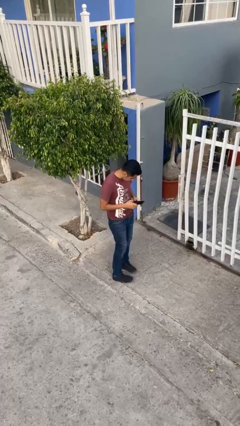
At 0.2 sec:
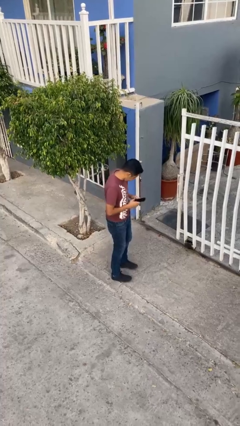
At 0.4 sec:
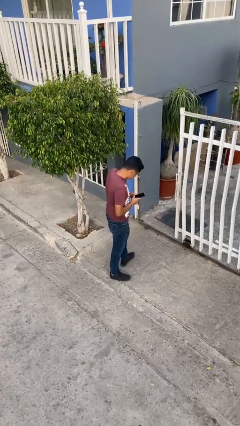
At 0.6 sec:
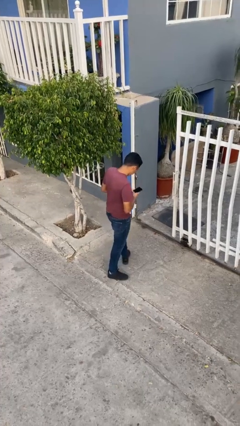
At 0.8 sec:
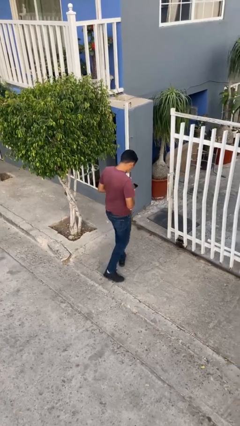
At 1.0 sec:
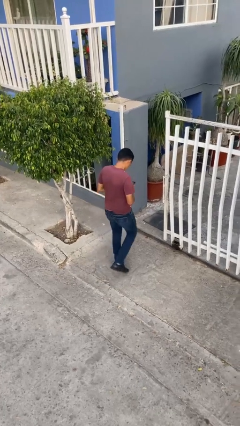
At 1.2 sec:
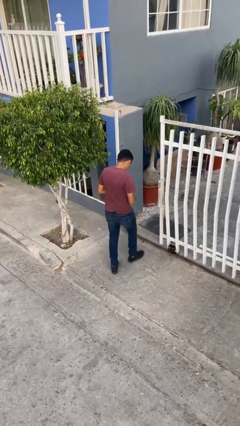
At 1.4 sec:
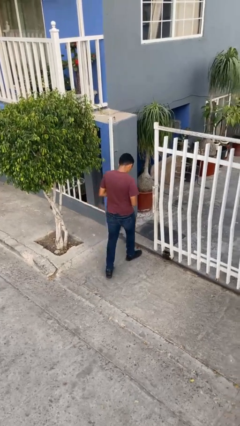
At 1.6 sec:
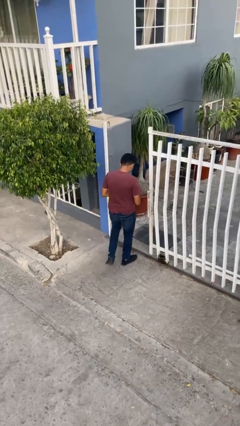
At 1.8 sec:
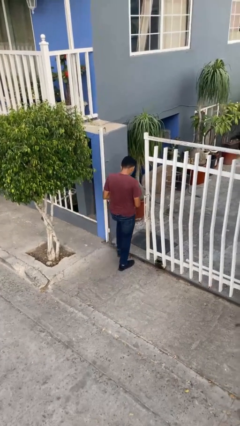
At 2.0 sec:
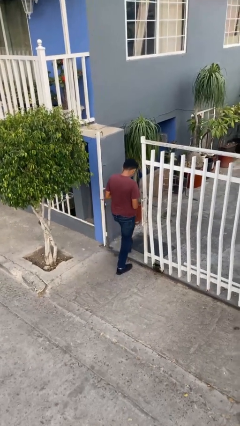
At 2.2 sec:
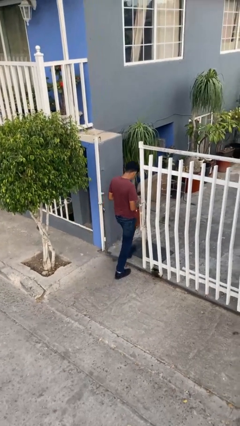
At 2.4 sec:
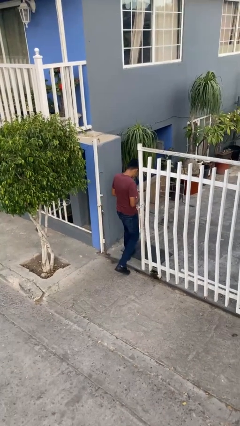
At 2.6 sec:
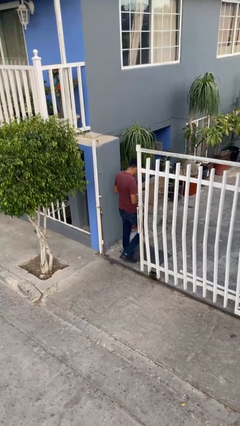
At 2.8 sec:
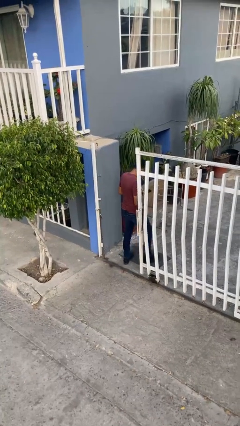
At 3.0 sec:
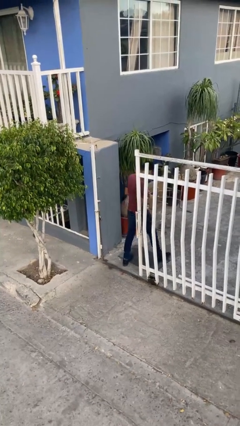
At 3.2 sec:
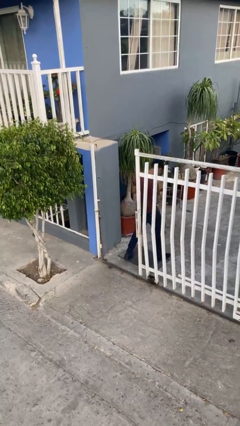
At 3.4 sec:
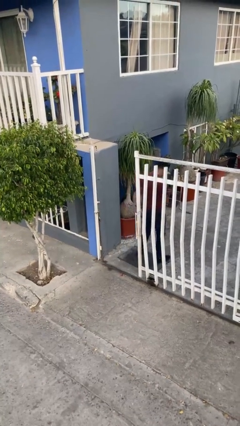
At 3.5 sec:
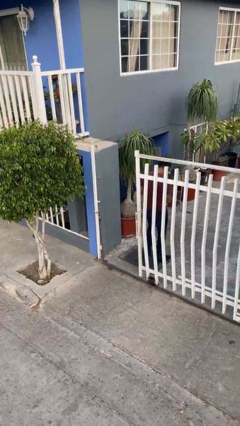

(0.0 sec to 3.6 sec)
person exits scene through structure

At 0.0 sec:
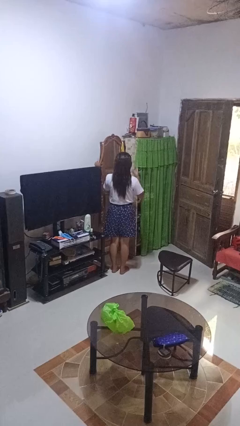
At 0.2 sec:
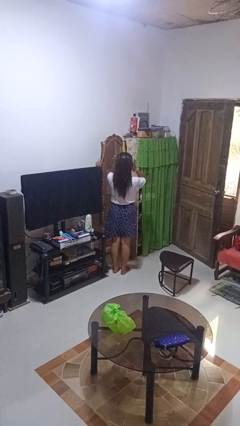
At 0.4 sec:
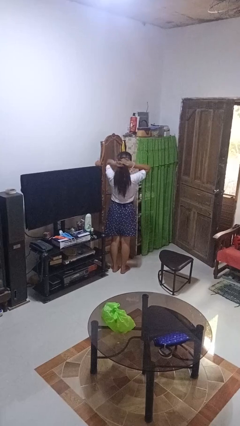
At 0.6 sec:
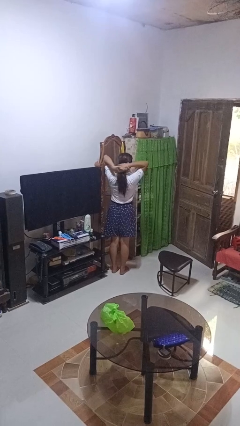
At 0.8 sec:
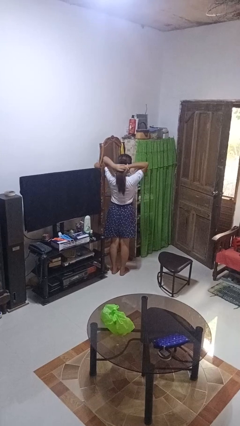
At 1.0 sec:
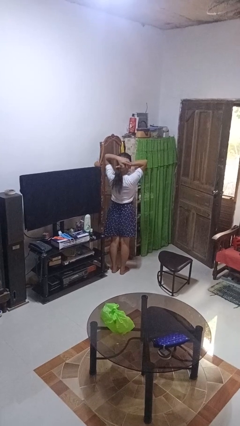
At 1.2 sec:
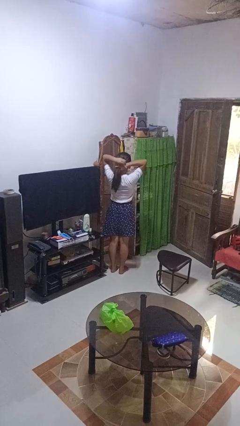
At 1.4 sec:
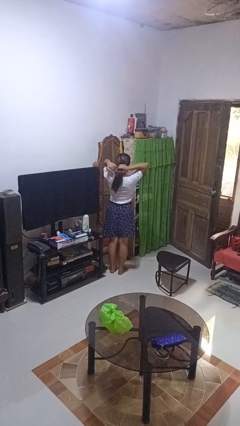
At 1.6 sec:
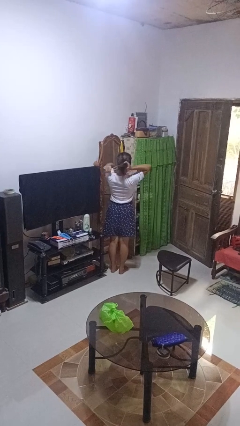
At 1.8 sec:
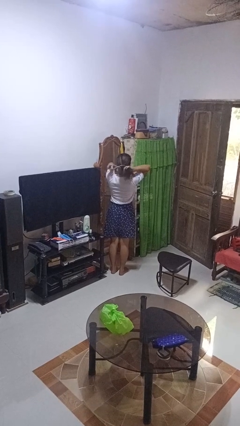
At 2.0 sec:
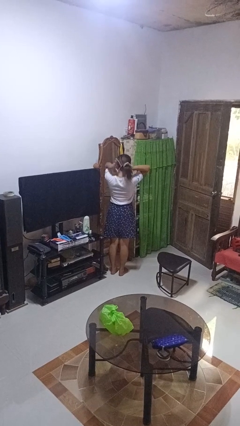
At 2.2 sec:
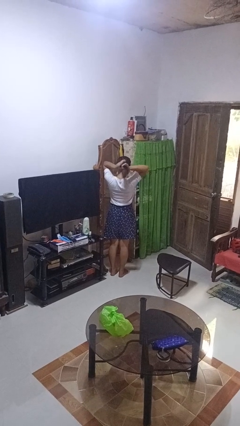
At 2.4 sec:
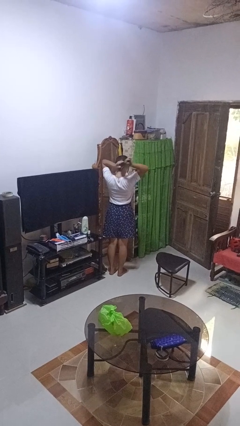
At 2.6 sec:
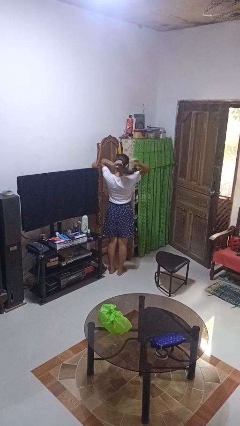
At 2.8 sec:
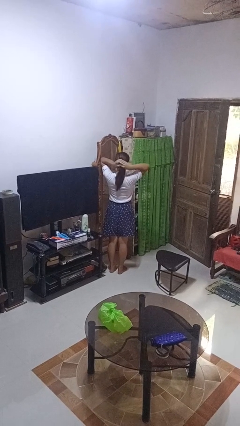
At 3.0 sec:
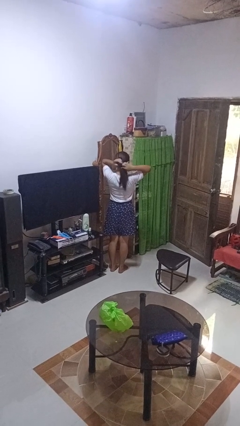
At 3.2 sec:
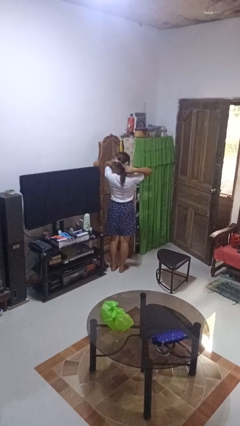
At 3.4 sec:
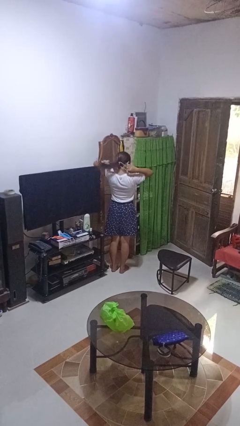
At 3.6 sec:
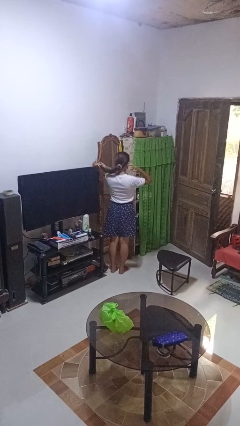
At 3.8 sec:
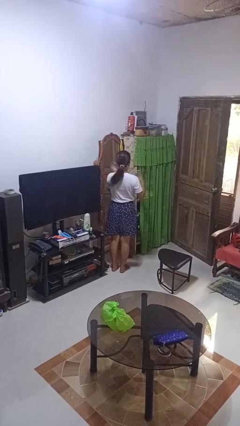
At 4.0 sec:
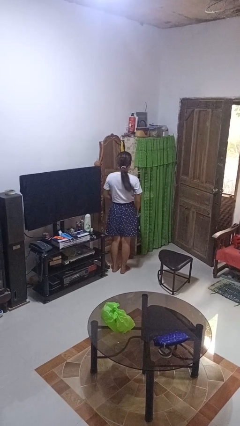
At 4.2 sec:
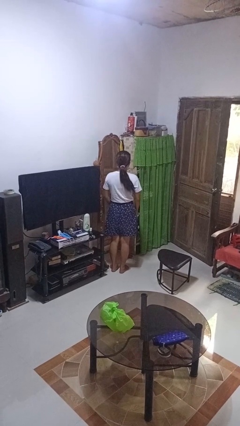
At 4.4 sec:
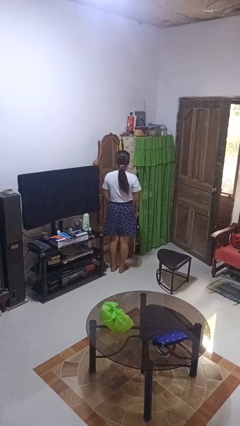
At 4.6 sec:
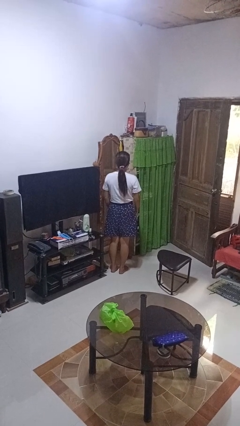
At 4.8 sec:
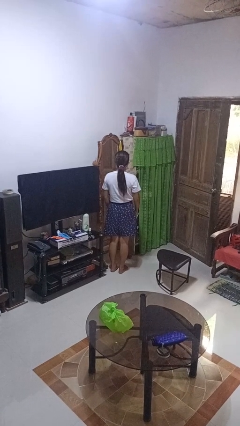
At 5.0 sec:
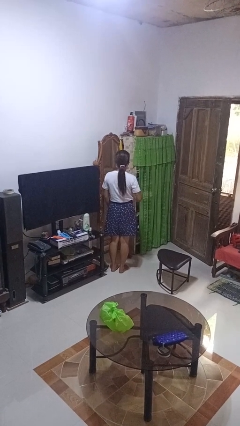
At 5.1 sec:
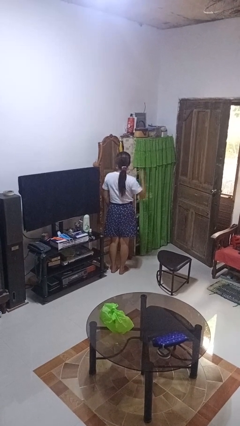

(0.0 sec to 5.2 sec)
person puts hair in ponytail

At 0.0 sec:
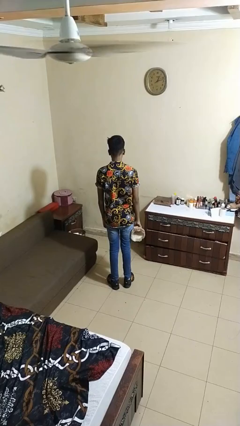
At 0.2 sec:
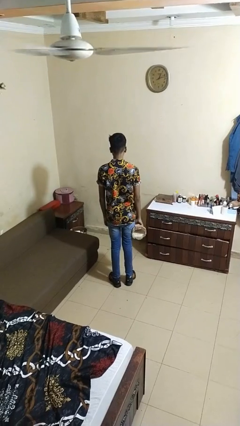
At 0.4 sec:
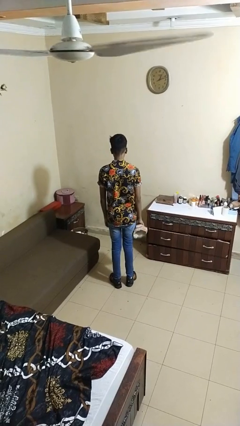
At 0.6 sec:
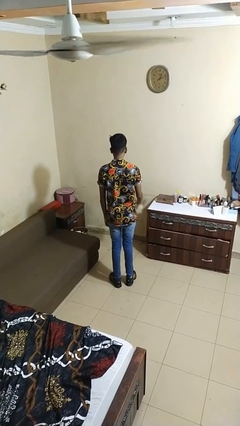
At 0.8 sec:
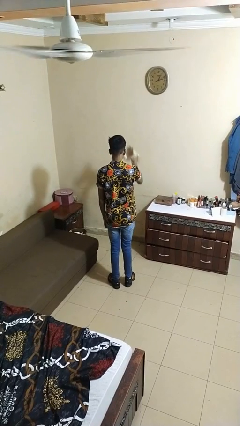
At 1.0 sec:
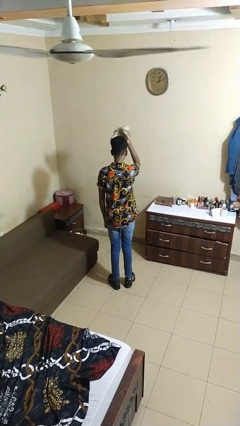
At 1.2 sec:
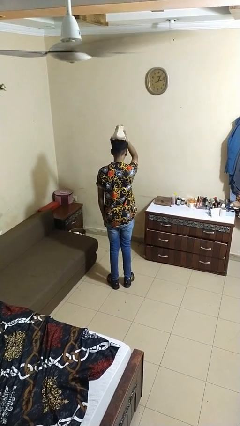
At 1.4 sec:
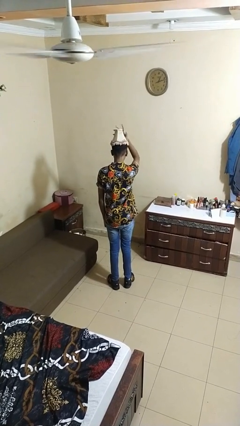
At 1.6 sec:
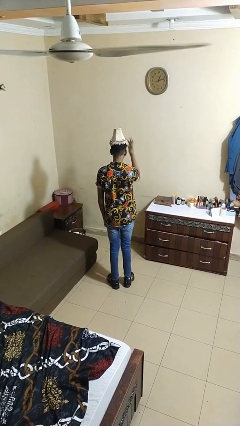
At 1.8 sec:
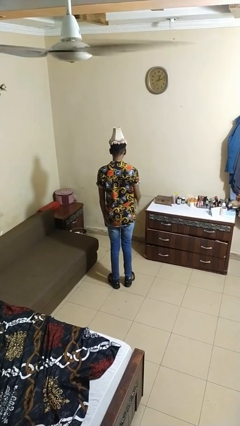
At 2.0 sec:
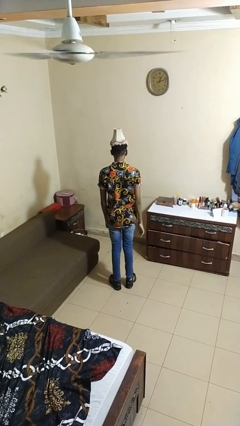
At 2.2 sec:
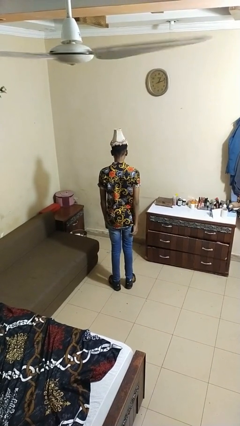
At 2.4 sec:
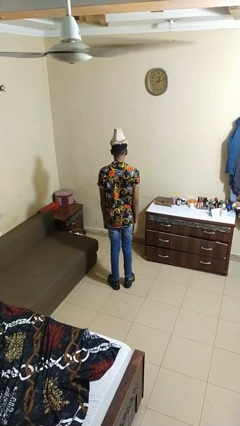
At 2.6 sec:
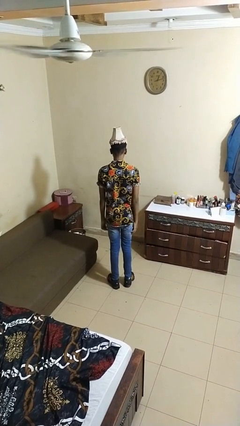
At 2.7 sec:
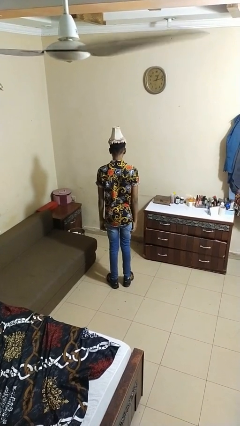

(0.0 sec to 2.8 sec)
person puts on hat

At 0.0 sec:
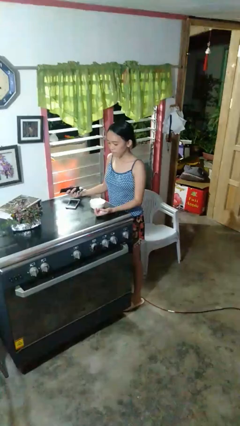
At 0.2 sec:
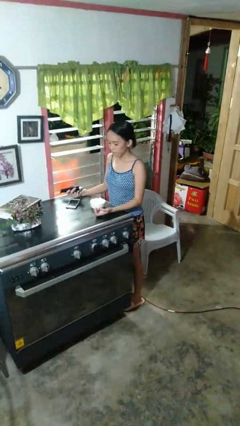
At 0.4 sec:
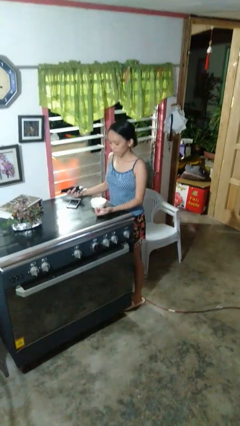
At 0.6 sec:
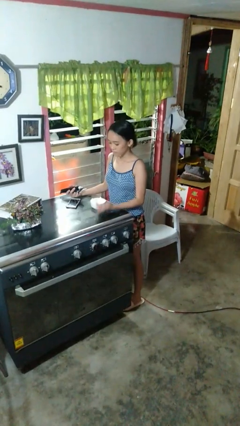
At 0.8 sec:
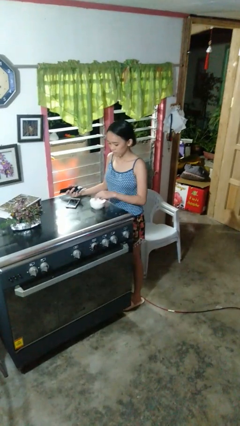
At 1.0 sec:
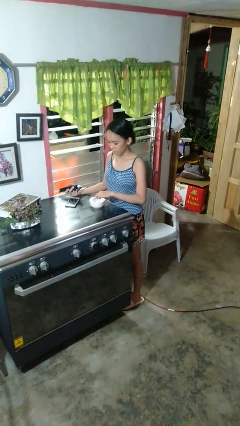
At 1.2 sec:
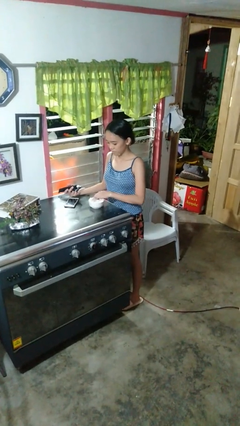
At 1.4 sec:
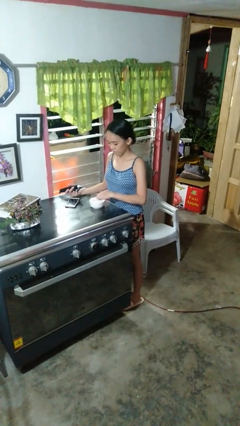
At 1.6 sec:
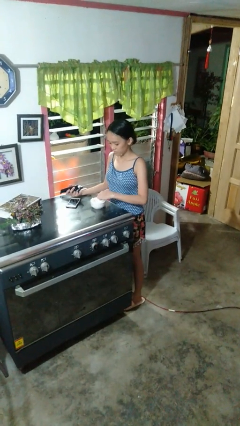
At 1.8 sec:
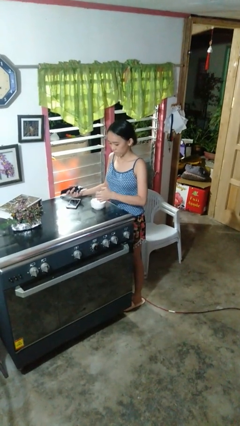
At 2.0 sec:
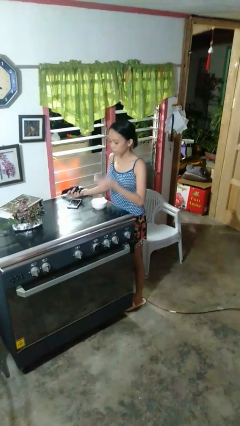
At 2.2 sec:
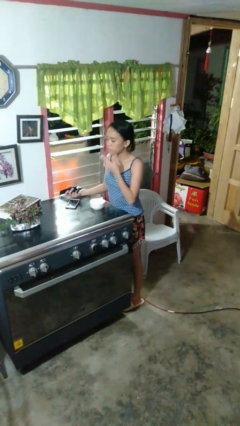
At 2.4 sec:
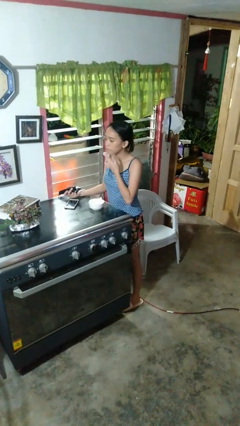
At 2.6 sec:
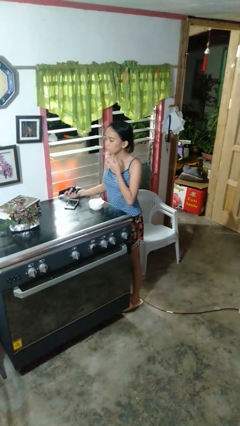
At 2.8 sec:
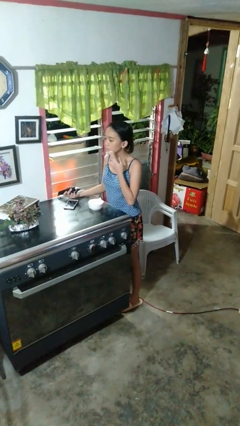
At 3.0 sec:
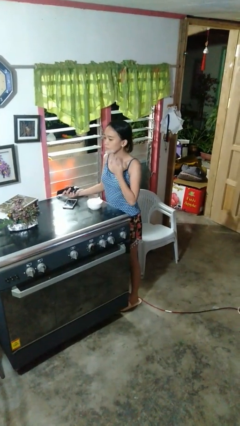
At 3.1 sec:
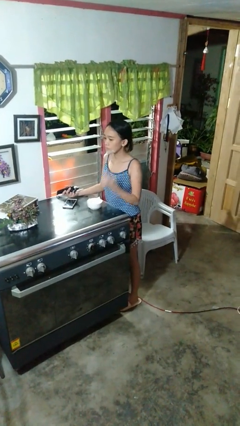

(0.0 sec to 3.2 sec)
person applies shaving cream

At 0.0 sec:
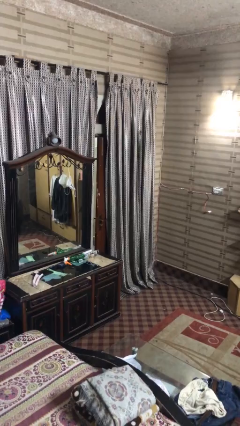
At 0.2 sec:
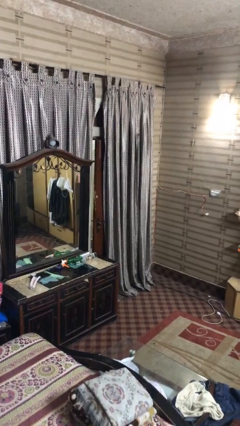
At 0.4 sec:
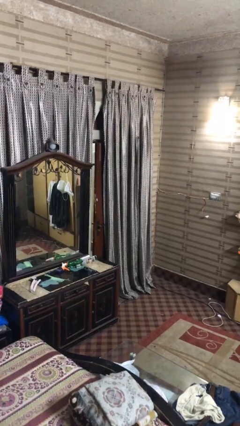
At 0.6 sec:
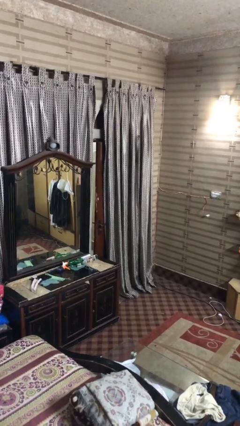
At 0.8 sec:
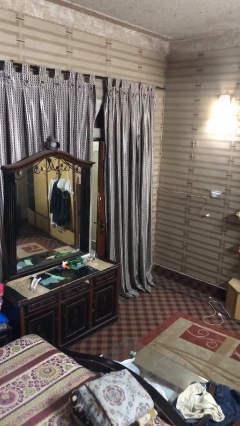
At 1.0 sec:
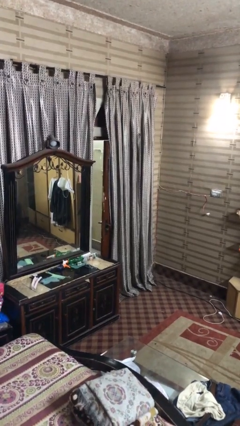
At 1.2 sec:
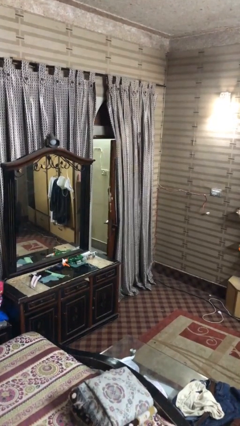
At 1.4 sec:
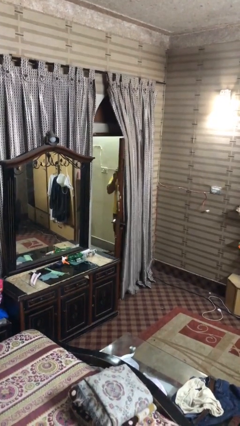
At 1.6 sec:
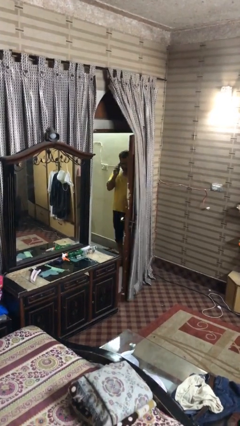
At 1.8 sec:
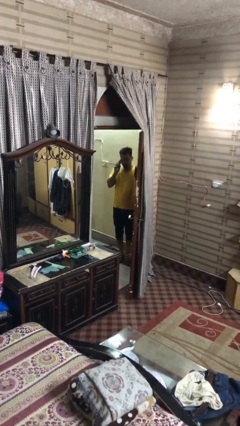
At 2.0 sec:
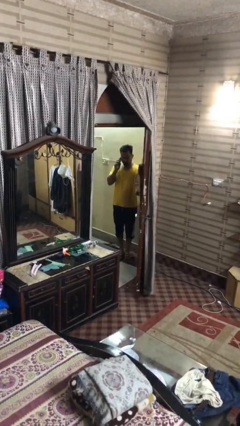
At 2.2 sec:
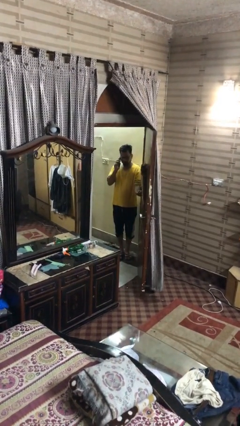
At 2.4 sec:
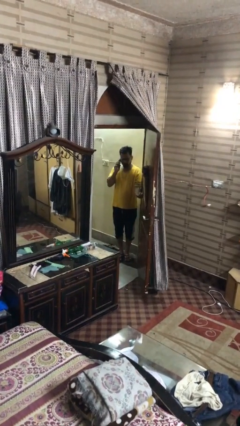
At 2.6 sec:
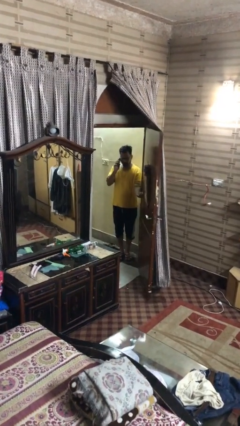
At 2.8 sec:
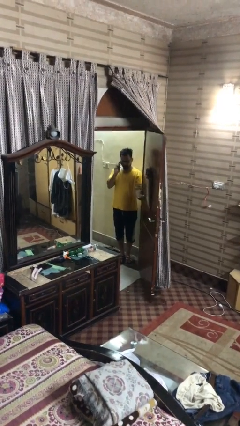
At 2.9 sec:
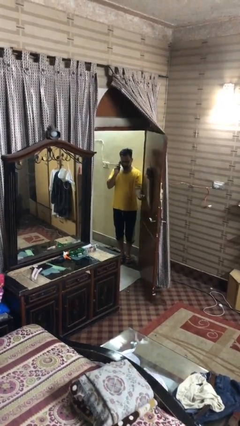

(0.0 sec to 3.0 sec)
person opens facility door
